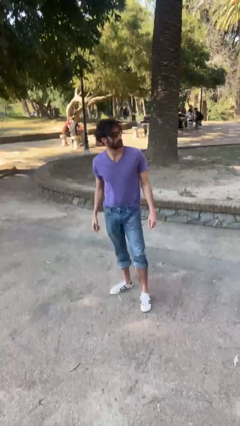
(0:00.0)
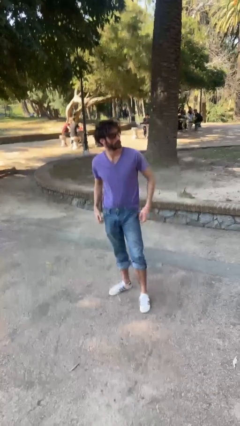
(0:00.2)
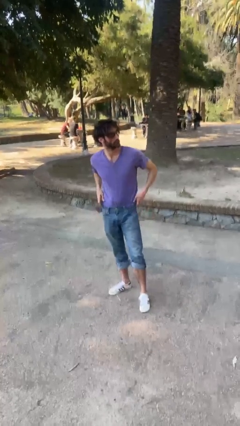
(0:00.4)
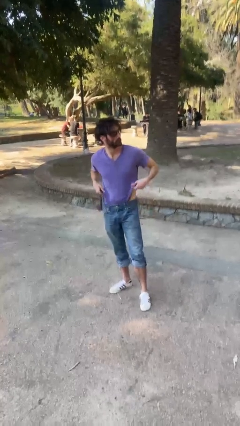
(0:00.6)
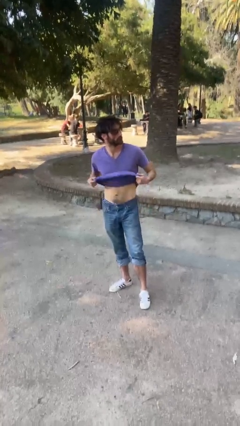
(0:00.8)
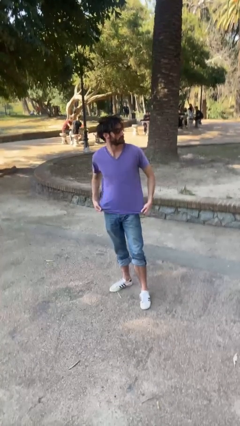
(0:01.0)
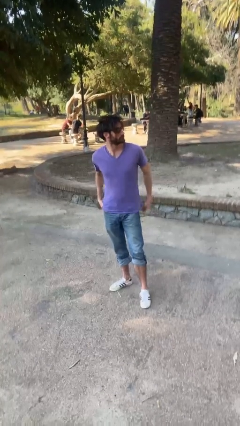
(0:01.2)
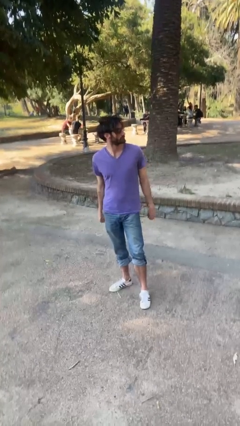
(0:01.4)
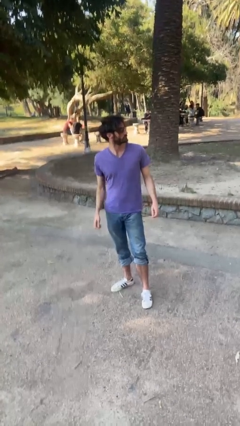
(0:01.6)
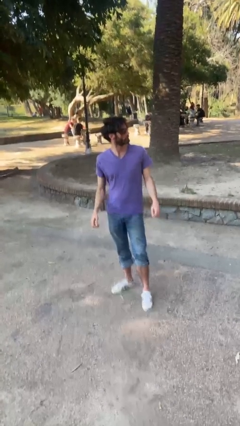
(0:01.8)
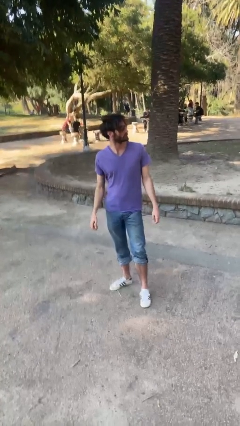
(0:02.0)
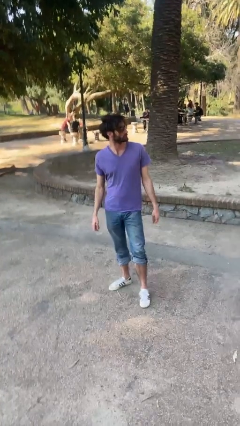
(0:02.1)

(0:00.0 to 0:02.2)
person untucks shirt

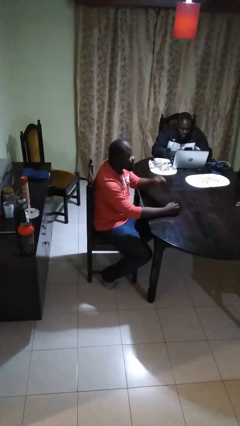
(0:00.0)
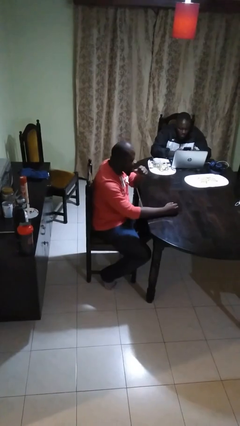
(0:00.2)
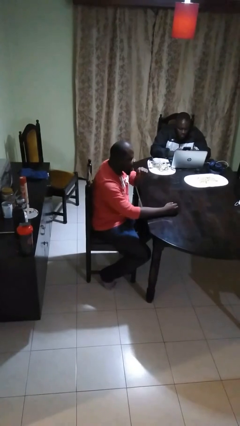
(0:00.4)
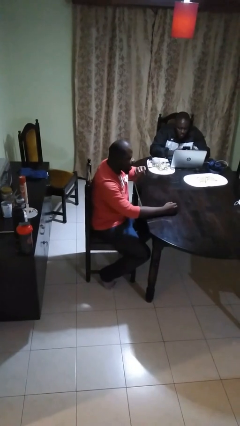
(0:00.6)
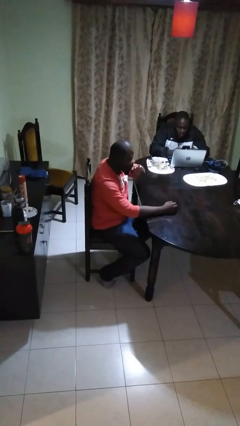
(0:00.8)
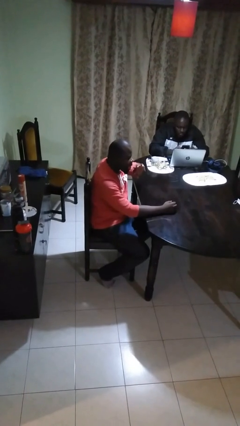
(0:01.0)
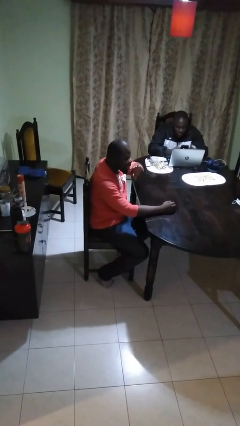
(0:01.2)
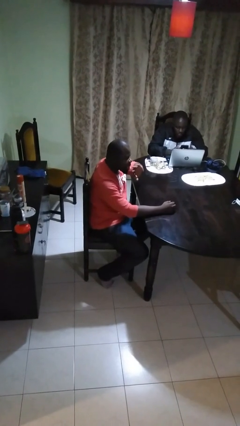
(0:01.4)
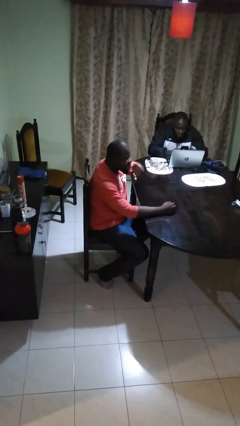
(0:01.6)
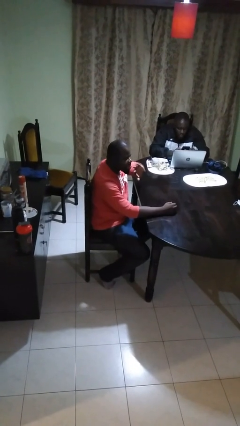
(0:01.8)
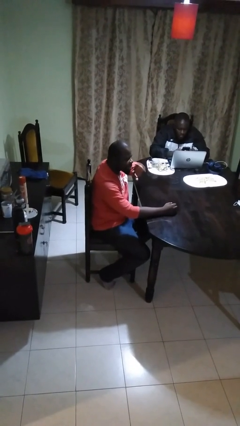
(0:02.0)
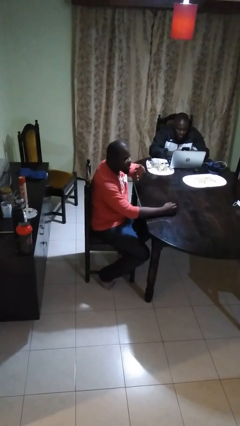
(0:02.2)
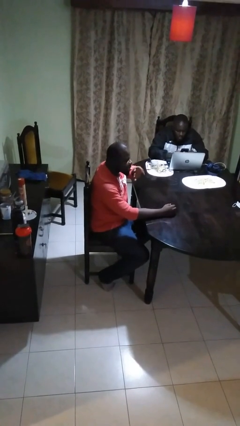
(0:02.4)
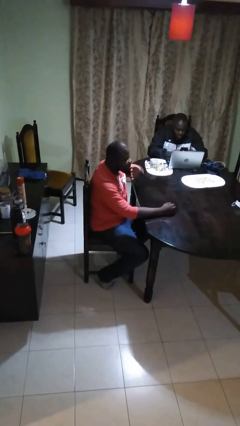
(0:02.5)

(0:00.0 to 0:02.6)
person licks fingers

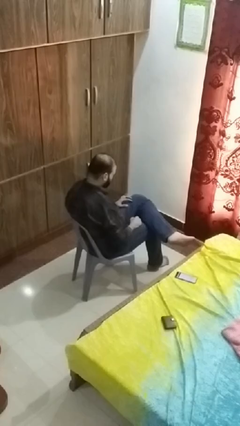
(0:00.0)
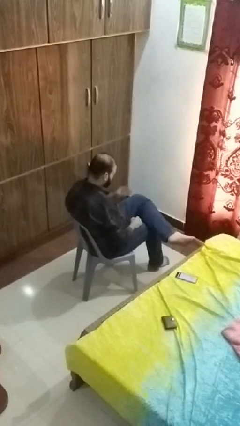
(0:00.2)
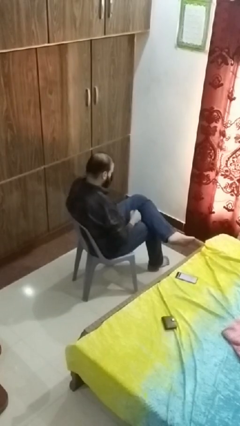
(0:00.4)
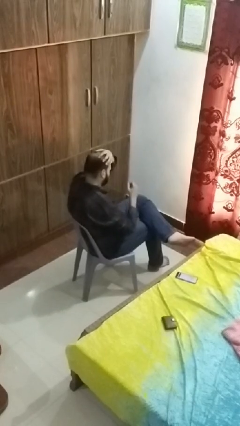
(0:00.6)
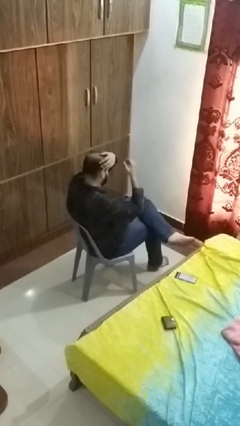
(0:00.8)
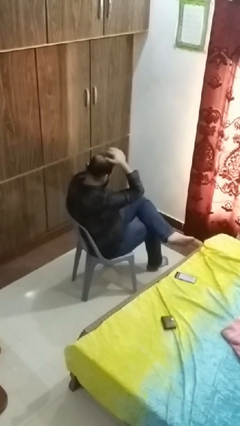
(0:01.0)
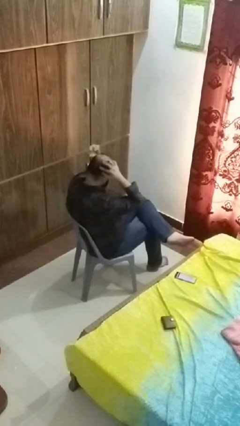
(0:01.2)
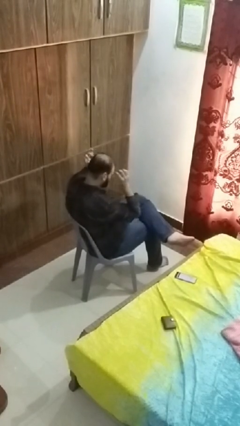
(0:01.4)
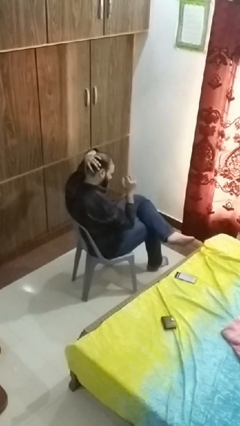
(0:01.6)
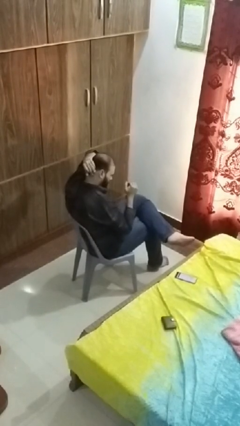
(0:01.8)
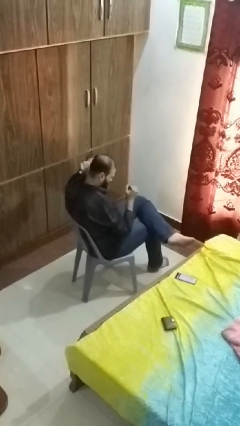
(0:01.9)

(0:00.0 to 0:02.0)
person strokes hair

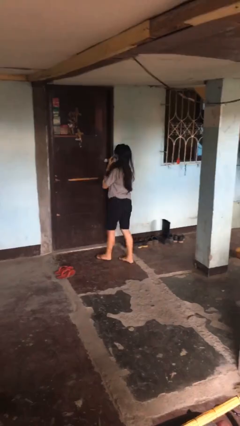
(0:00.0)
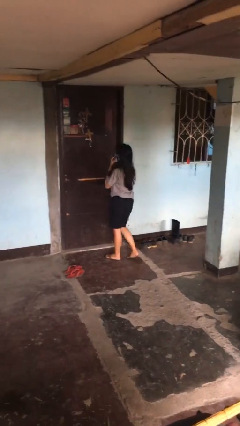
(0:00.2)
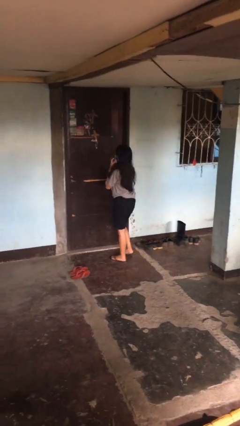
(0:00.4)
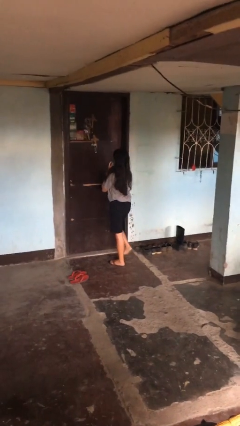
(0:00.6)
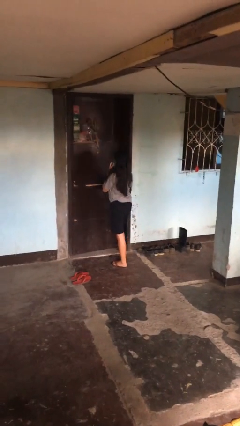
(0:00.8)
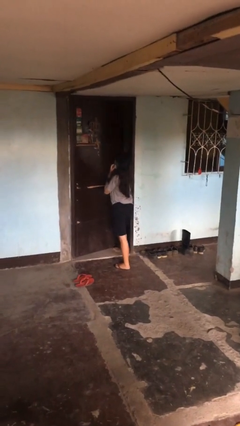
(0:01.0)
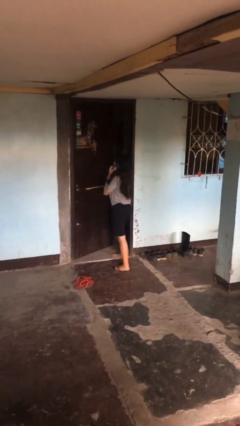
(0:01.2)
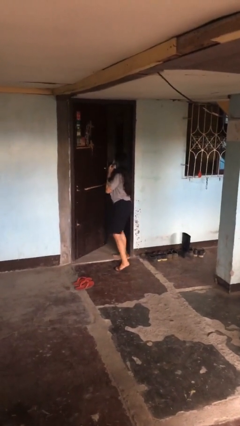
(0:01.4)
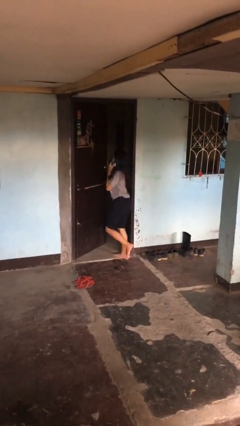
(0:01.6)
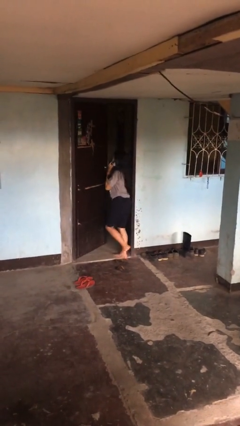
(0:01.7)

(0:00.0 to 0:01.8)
person opens facility door

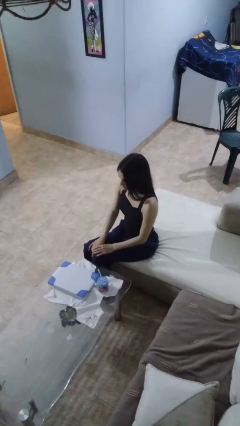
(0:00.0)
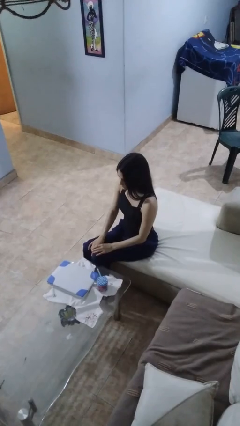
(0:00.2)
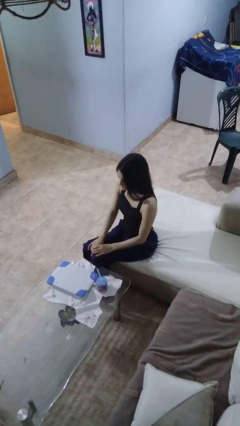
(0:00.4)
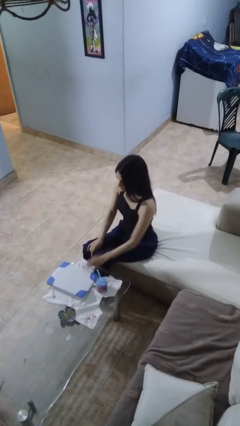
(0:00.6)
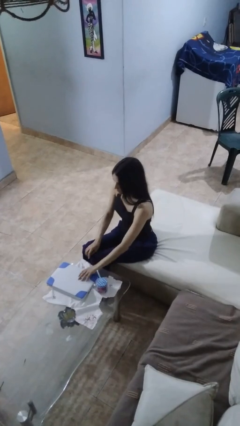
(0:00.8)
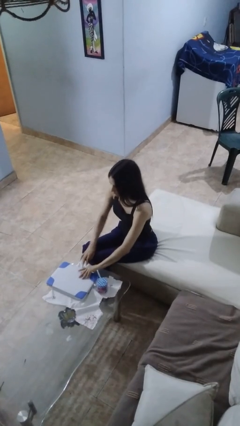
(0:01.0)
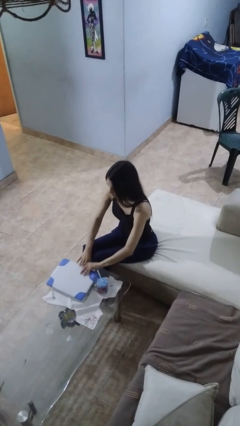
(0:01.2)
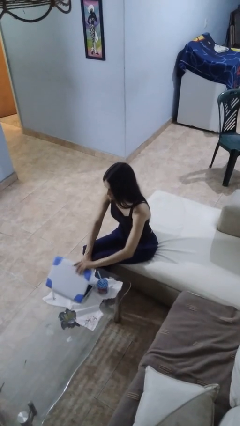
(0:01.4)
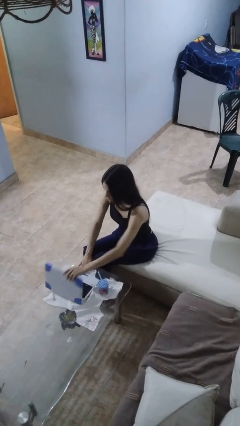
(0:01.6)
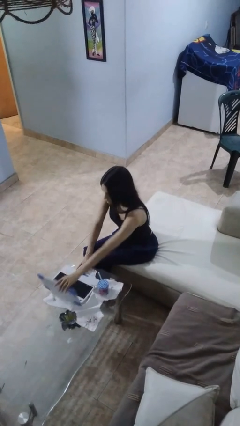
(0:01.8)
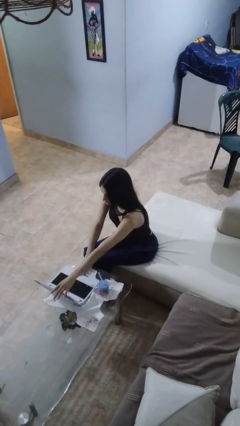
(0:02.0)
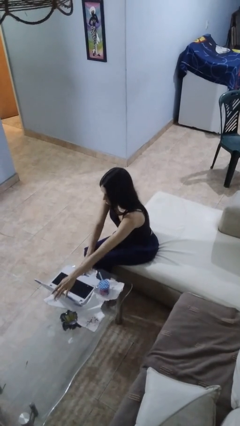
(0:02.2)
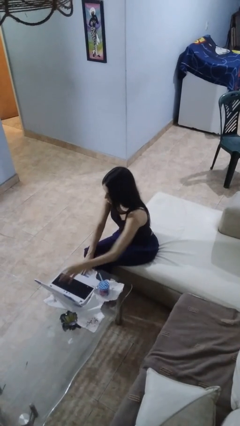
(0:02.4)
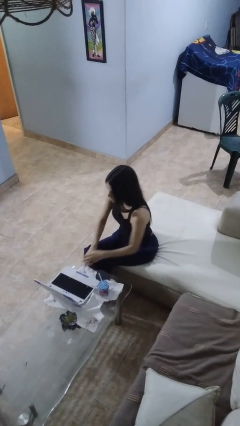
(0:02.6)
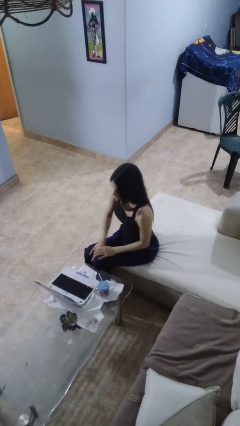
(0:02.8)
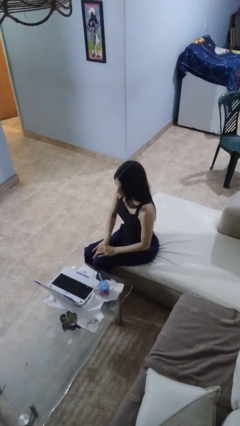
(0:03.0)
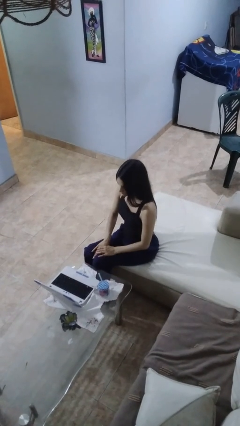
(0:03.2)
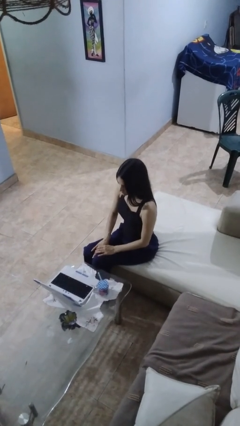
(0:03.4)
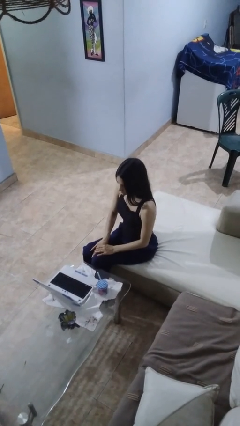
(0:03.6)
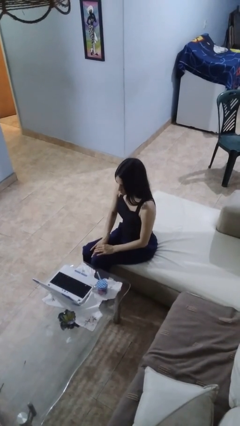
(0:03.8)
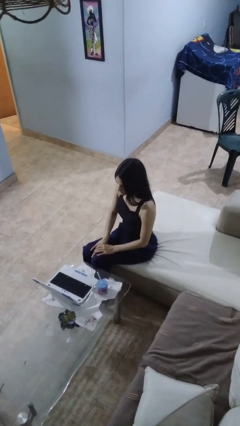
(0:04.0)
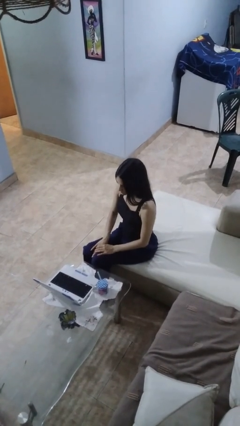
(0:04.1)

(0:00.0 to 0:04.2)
person opens laptop

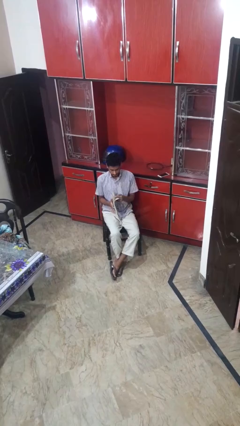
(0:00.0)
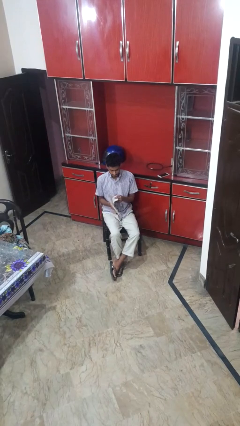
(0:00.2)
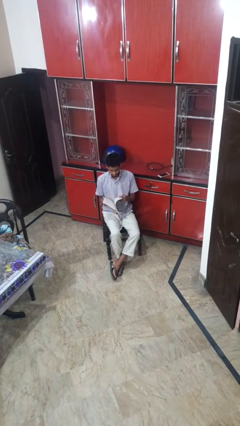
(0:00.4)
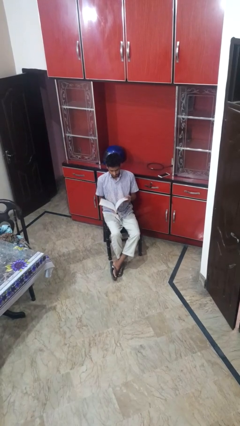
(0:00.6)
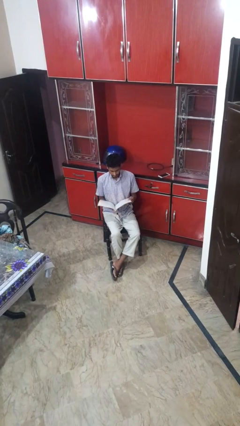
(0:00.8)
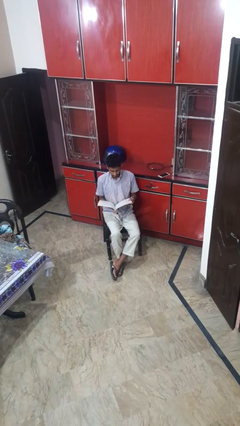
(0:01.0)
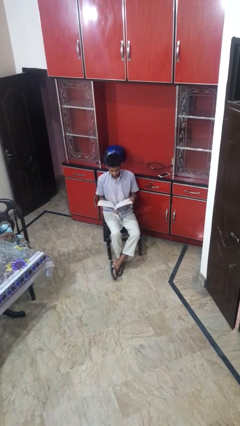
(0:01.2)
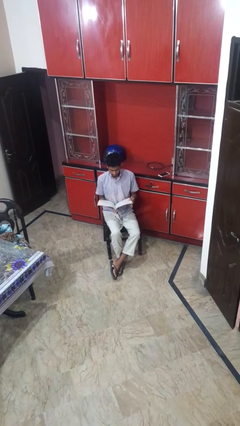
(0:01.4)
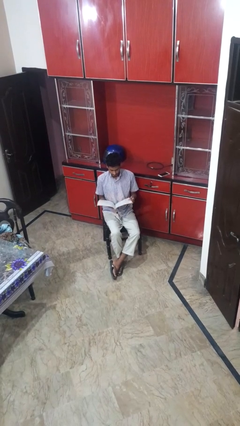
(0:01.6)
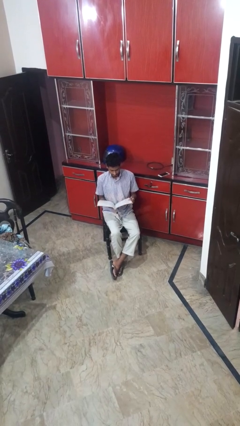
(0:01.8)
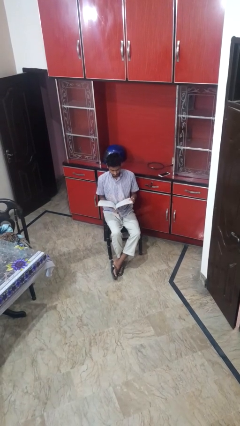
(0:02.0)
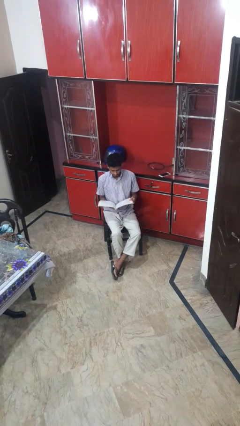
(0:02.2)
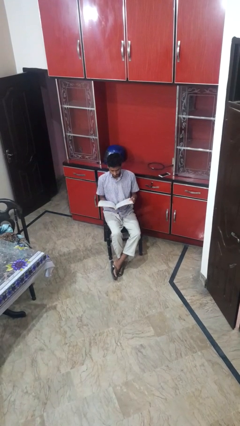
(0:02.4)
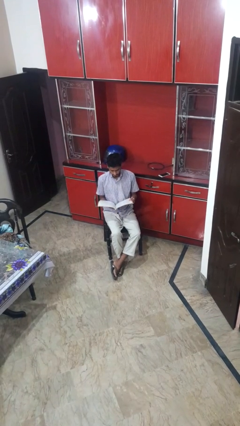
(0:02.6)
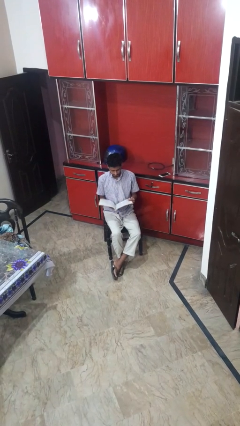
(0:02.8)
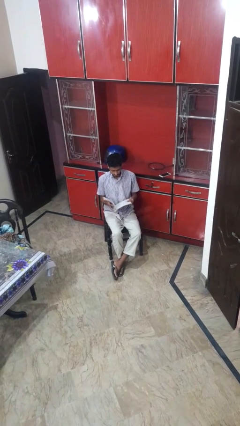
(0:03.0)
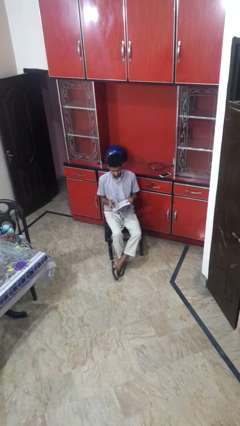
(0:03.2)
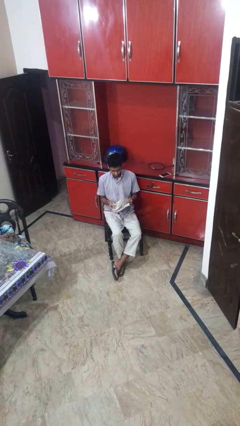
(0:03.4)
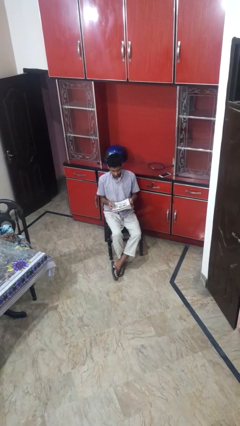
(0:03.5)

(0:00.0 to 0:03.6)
person reads magazine

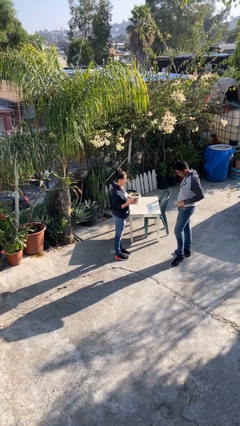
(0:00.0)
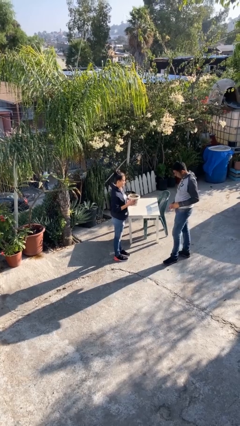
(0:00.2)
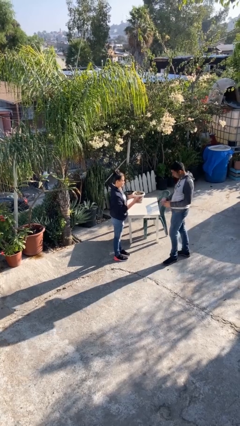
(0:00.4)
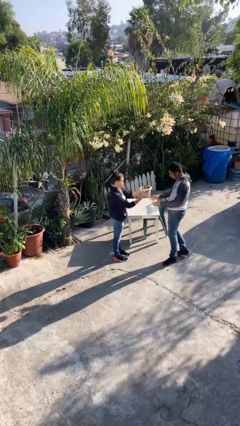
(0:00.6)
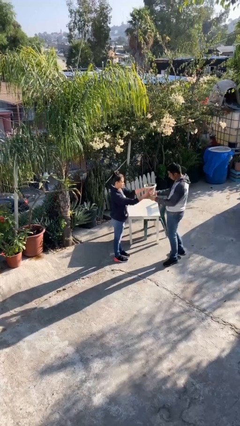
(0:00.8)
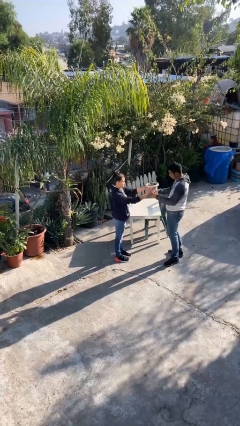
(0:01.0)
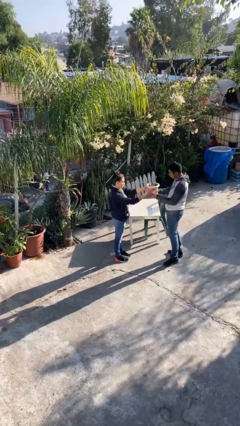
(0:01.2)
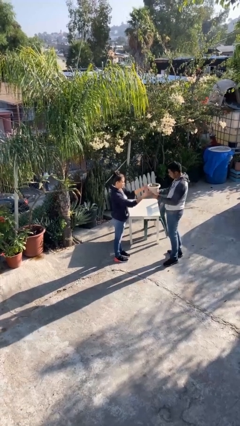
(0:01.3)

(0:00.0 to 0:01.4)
person transfers object to person
